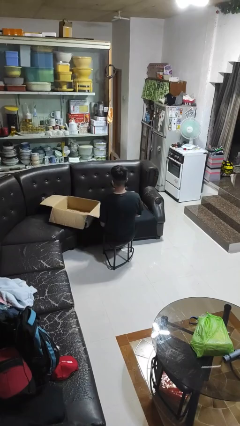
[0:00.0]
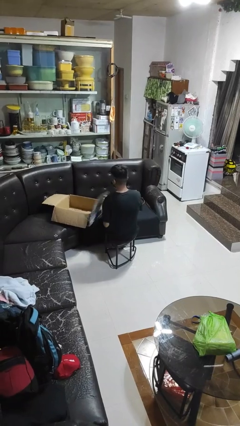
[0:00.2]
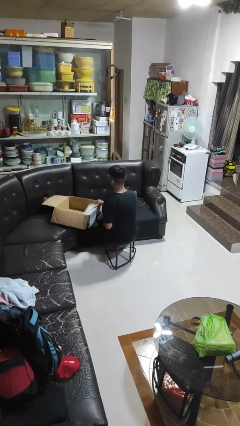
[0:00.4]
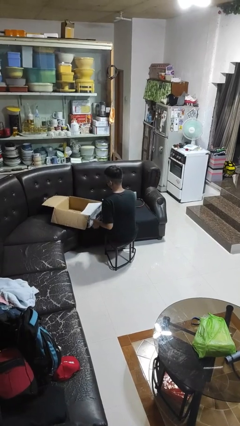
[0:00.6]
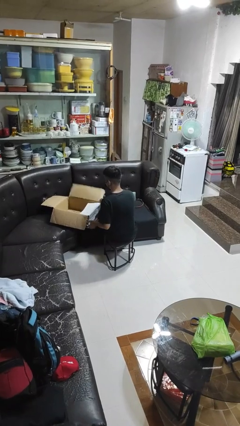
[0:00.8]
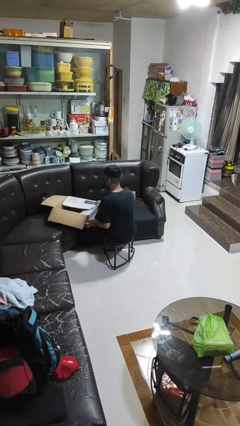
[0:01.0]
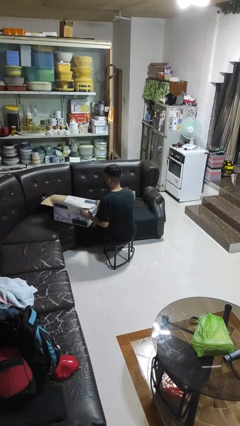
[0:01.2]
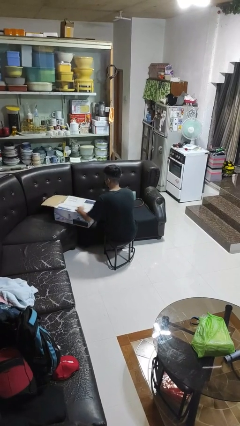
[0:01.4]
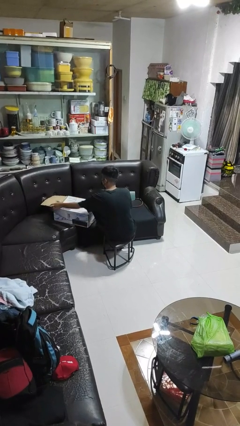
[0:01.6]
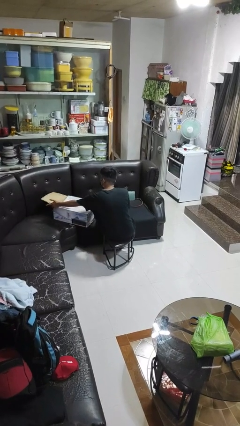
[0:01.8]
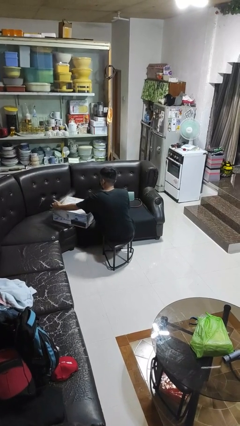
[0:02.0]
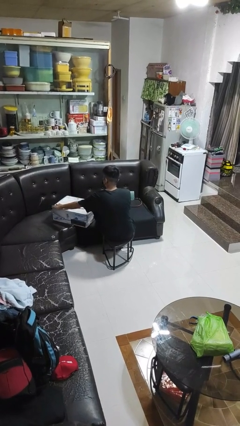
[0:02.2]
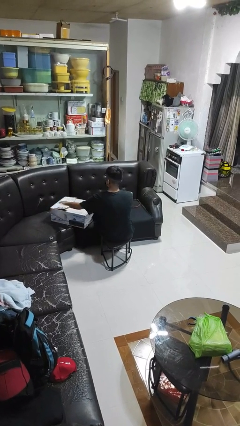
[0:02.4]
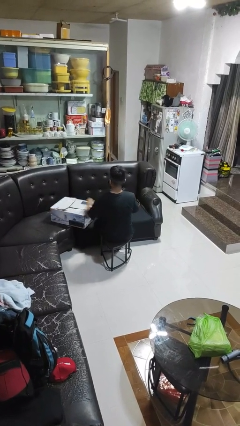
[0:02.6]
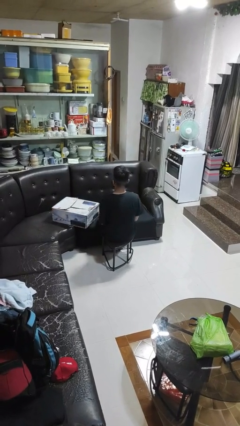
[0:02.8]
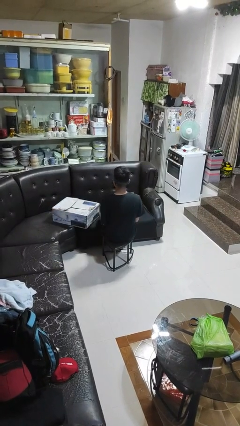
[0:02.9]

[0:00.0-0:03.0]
person closes box

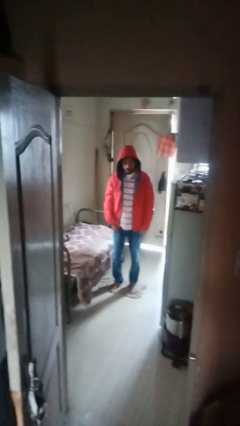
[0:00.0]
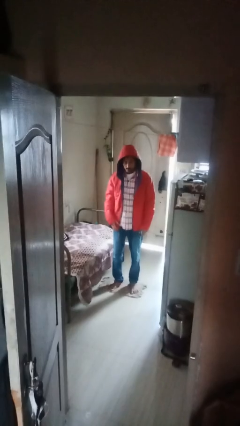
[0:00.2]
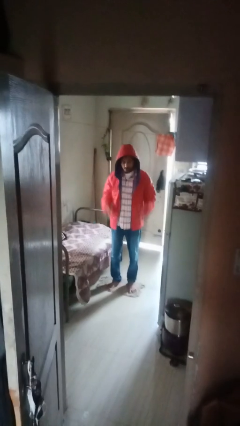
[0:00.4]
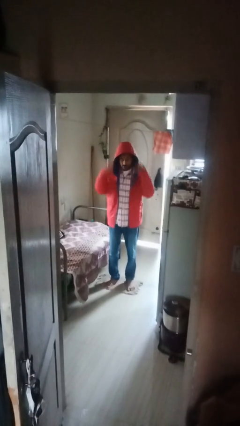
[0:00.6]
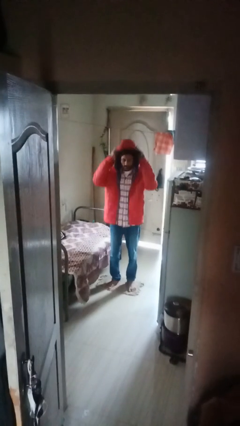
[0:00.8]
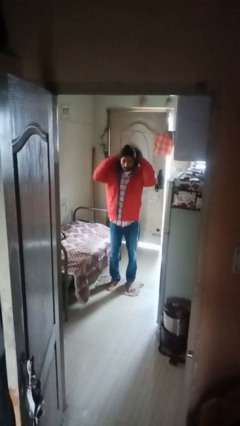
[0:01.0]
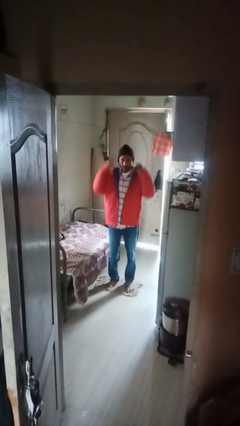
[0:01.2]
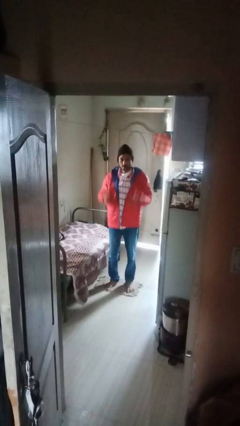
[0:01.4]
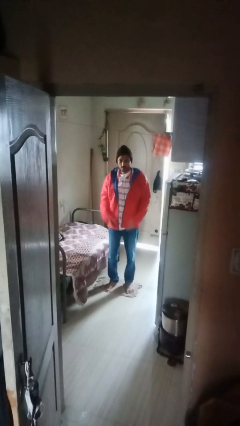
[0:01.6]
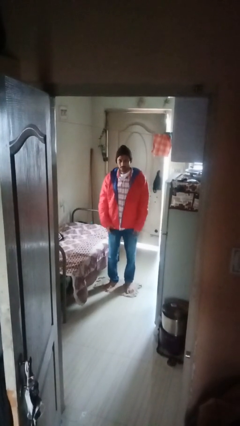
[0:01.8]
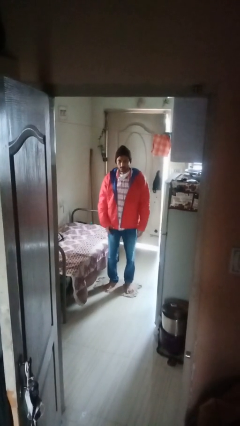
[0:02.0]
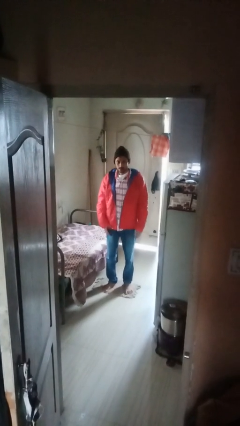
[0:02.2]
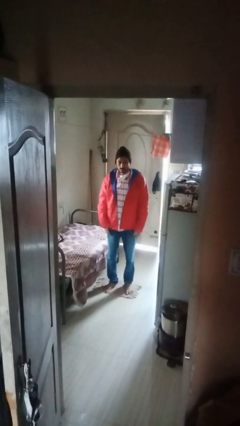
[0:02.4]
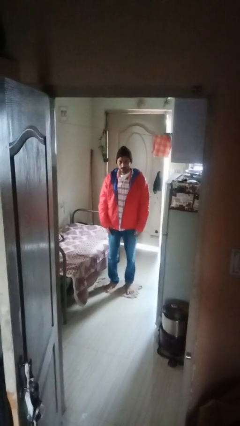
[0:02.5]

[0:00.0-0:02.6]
person takes off hoodie

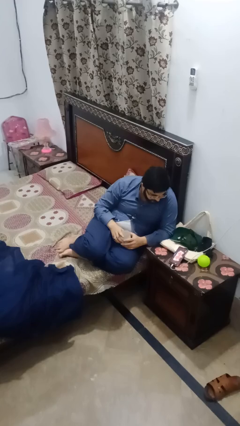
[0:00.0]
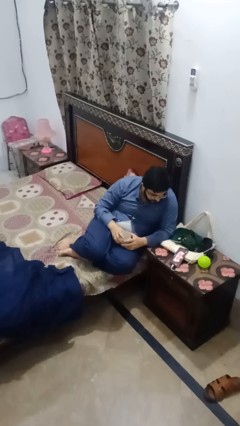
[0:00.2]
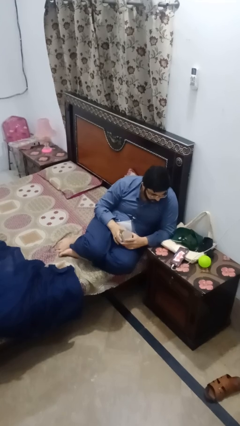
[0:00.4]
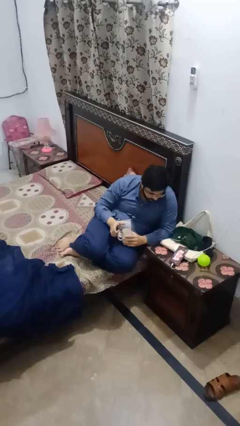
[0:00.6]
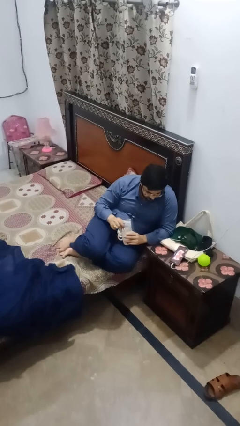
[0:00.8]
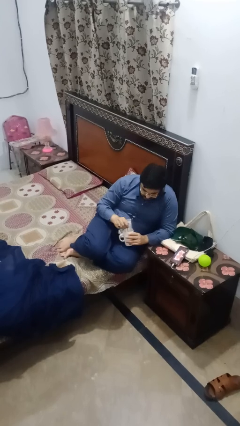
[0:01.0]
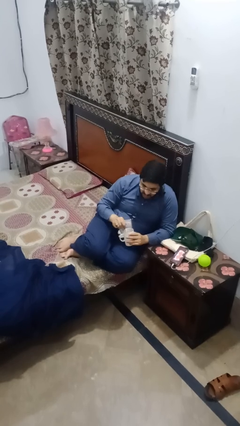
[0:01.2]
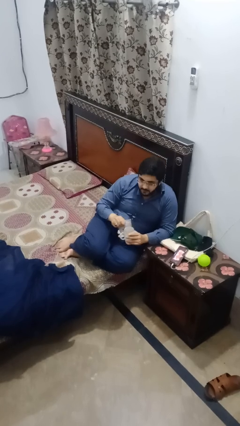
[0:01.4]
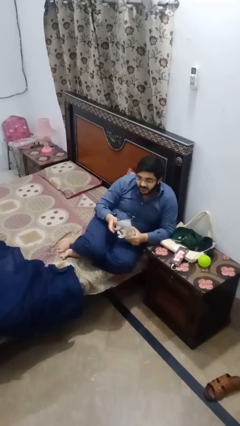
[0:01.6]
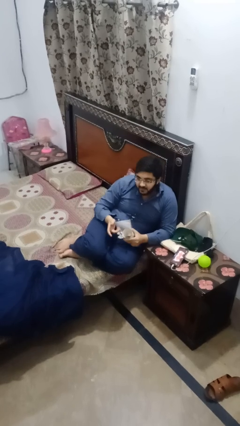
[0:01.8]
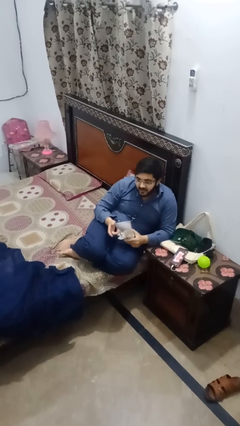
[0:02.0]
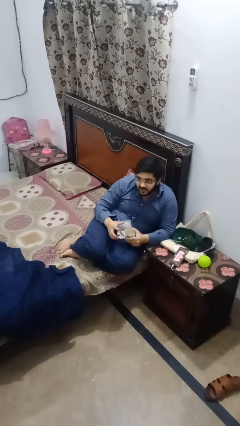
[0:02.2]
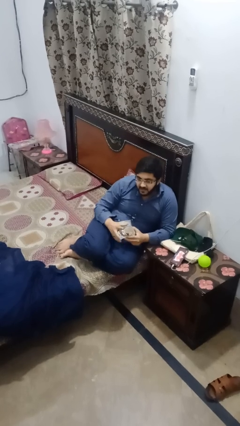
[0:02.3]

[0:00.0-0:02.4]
person stirs mug

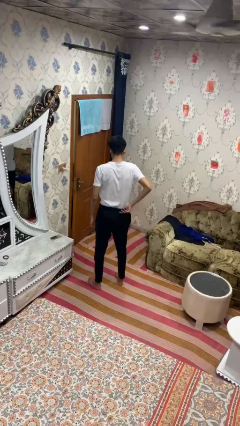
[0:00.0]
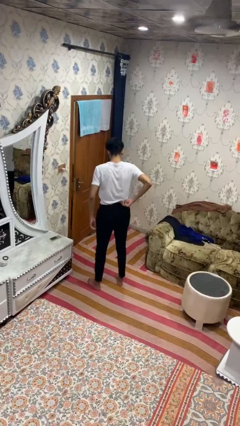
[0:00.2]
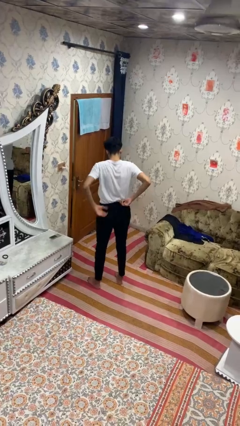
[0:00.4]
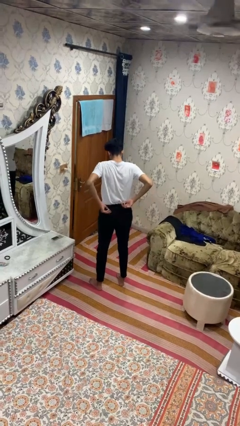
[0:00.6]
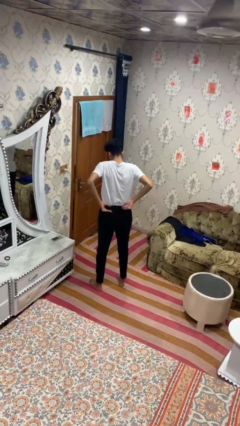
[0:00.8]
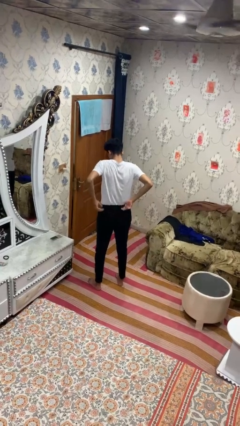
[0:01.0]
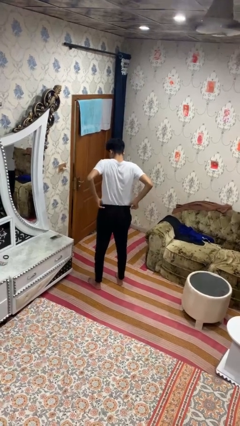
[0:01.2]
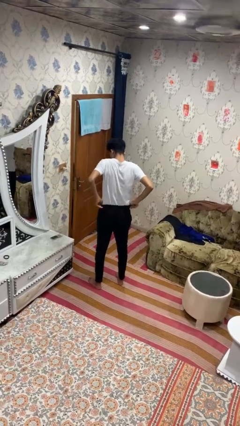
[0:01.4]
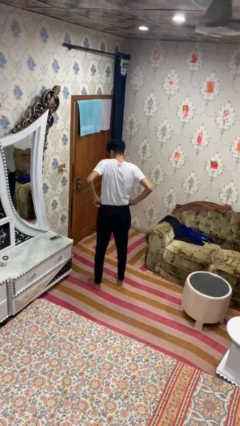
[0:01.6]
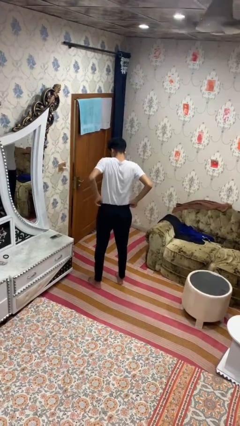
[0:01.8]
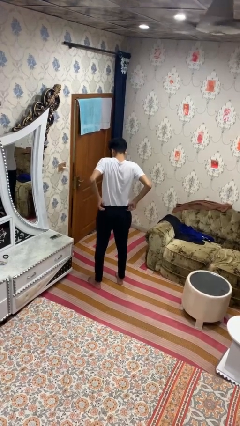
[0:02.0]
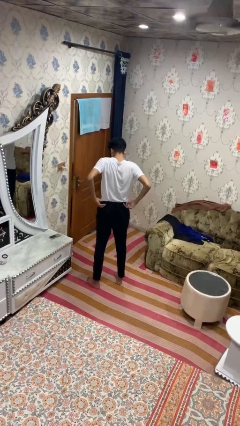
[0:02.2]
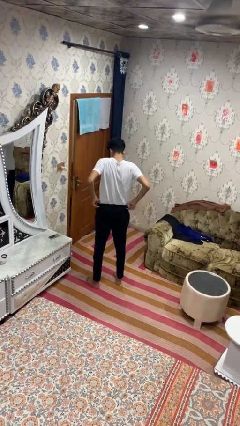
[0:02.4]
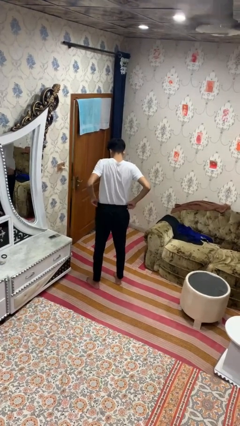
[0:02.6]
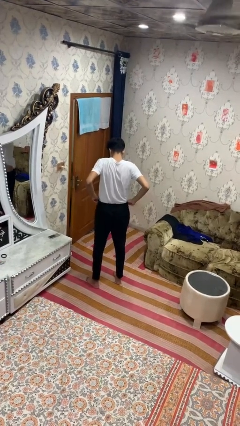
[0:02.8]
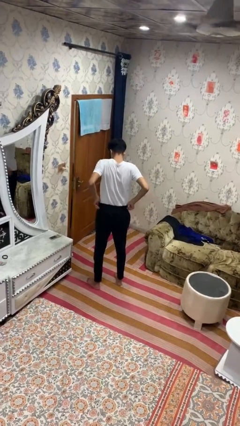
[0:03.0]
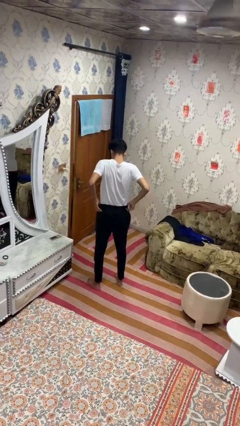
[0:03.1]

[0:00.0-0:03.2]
person hikes up pants

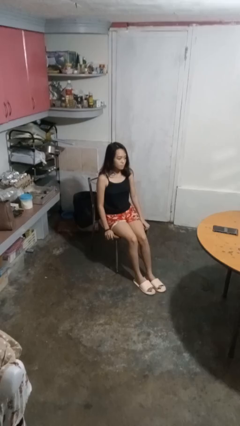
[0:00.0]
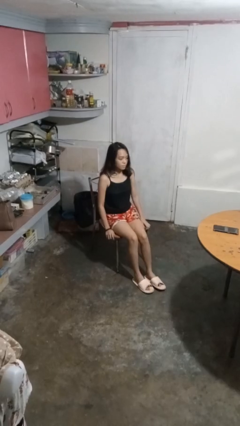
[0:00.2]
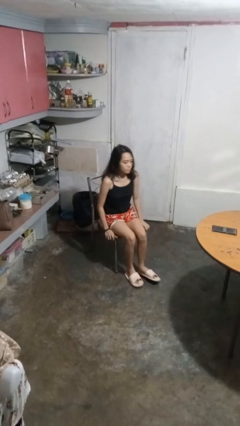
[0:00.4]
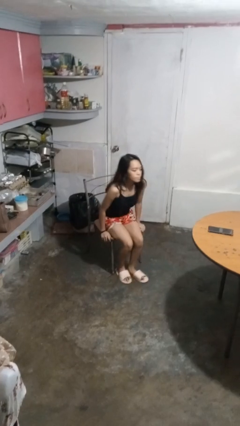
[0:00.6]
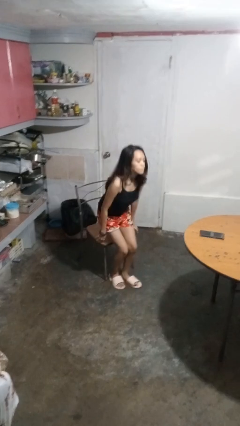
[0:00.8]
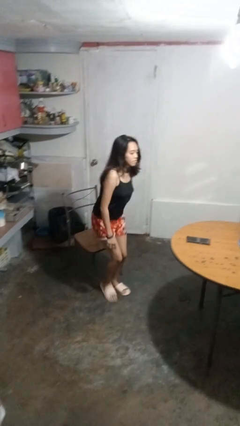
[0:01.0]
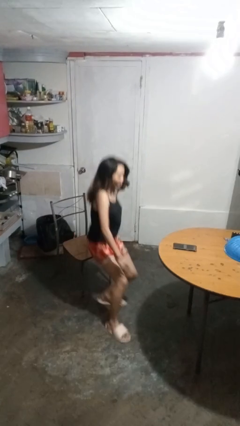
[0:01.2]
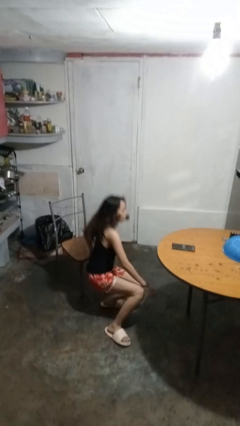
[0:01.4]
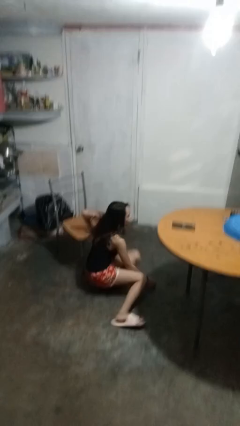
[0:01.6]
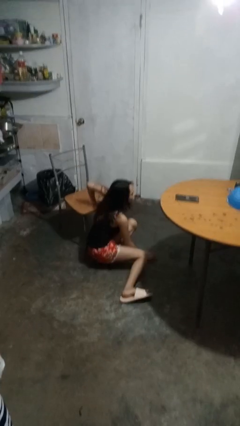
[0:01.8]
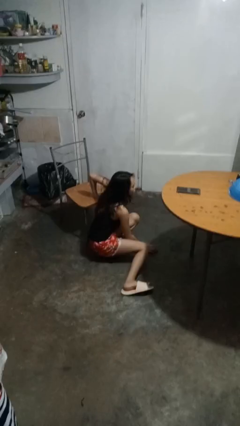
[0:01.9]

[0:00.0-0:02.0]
person falls from chair

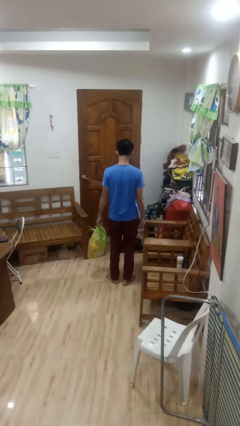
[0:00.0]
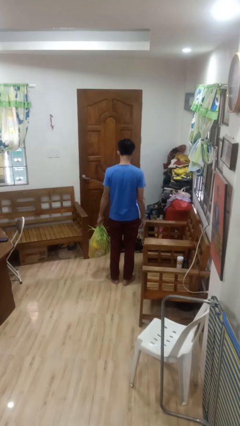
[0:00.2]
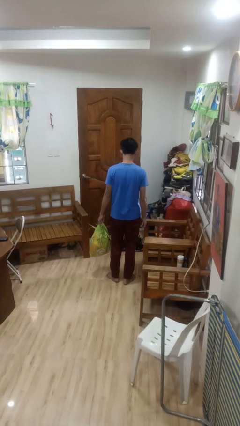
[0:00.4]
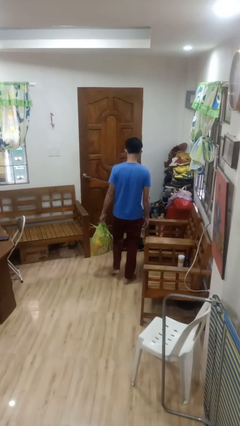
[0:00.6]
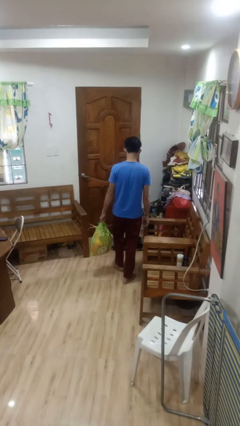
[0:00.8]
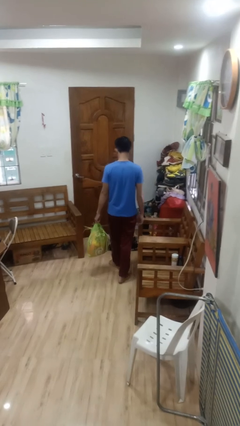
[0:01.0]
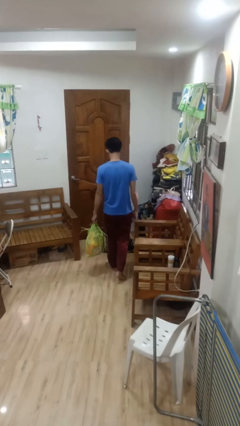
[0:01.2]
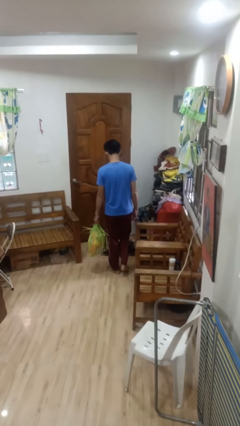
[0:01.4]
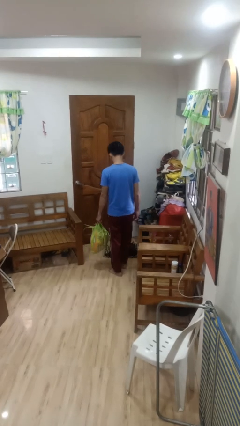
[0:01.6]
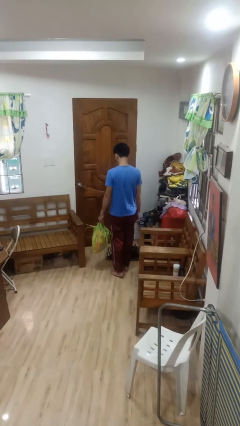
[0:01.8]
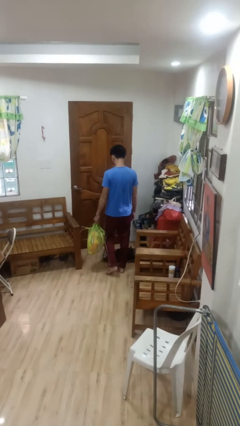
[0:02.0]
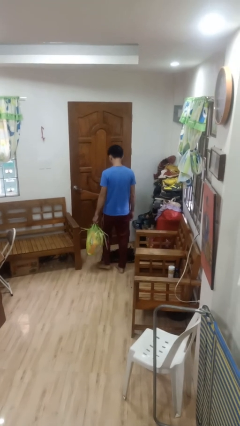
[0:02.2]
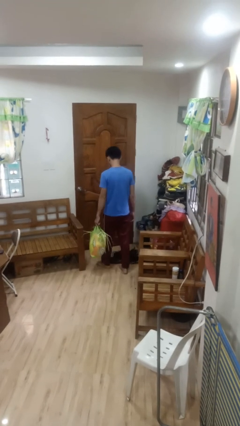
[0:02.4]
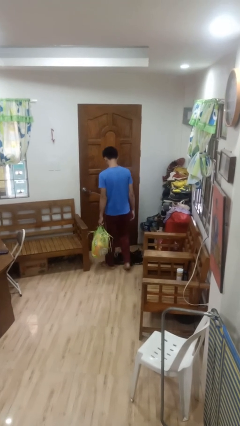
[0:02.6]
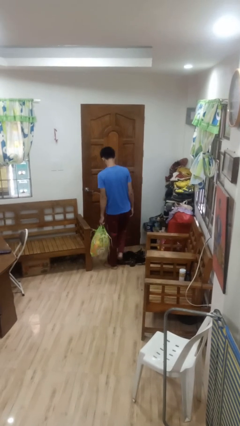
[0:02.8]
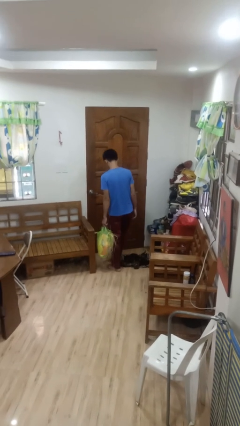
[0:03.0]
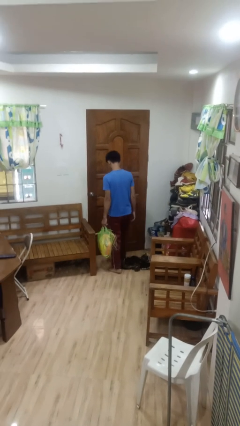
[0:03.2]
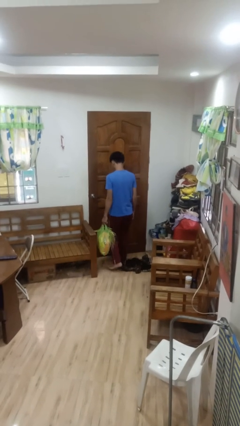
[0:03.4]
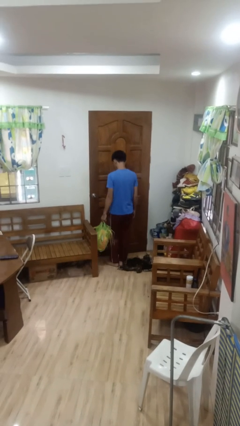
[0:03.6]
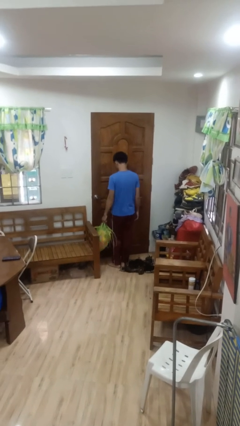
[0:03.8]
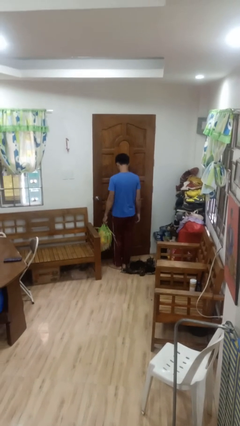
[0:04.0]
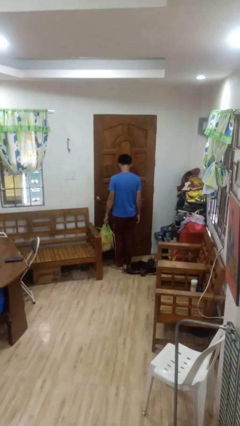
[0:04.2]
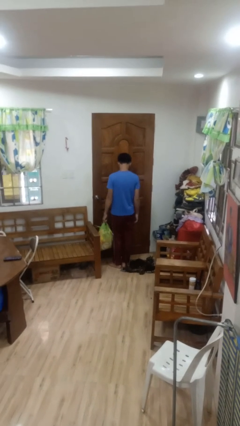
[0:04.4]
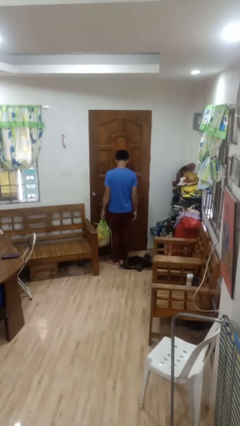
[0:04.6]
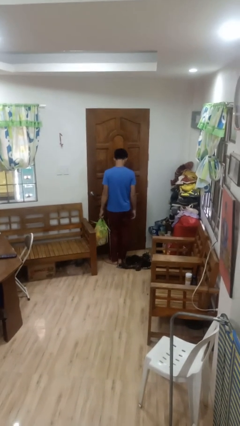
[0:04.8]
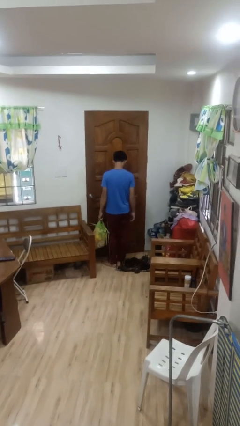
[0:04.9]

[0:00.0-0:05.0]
person carries groceries
